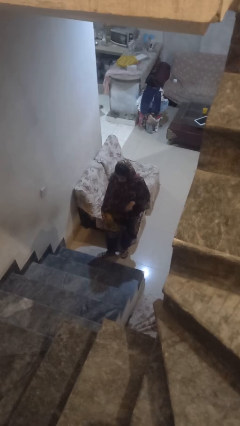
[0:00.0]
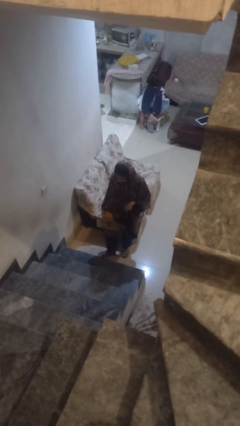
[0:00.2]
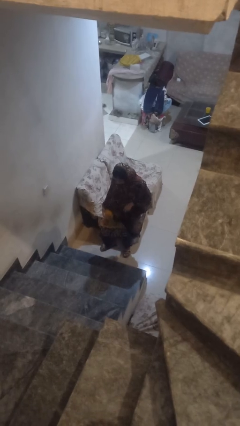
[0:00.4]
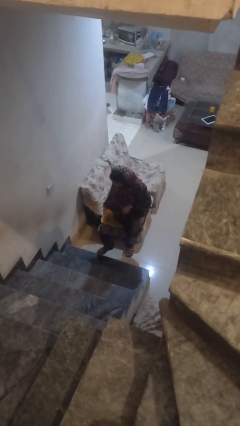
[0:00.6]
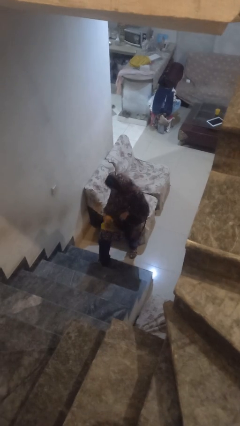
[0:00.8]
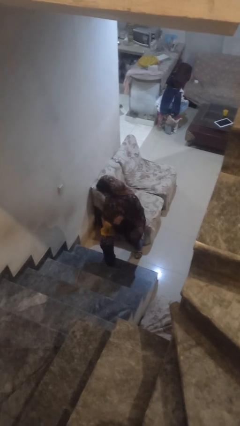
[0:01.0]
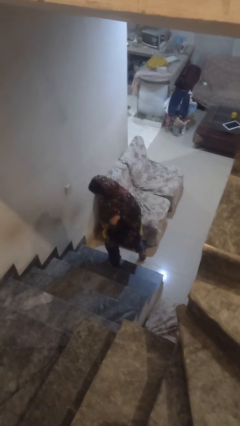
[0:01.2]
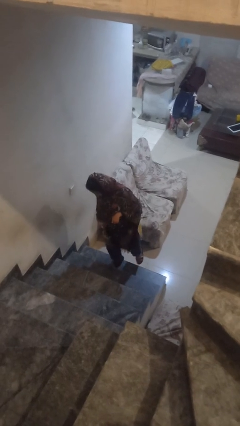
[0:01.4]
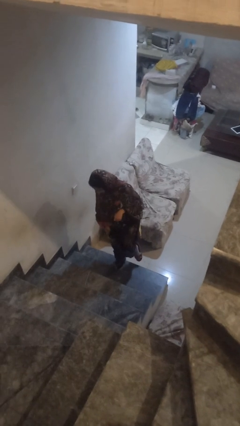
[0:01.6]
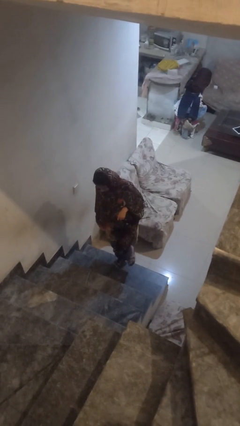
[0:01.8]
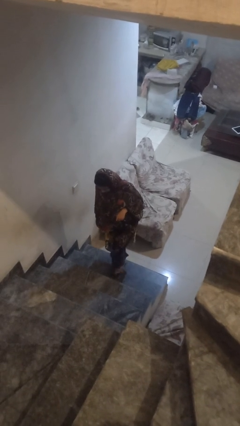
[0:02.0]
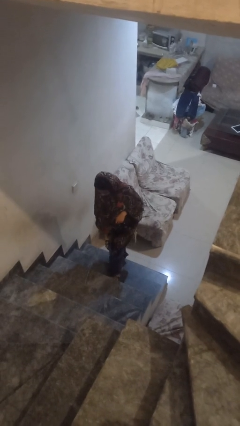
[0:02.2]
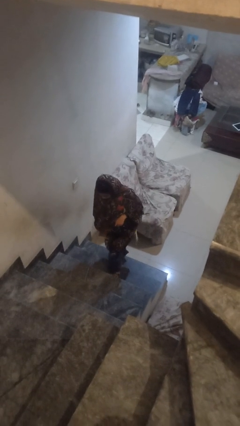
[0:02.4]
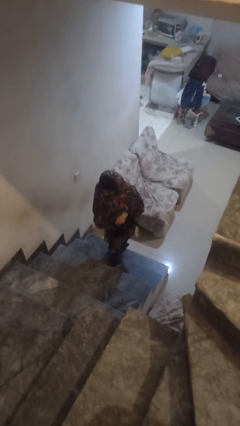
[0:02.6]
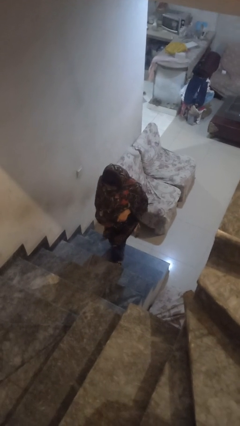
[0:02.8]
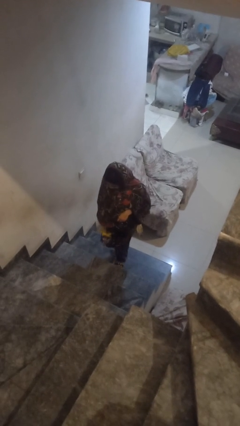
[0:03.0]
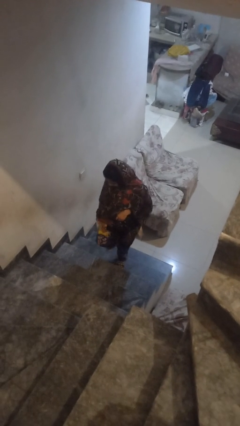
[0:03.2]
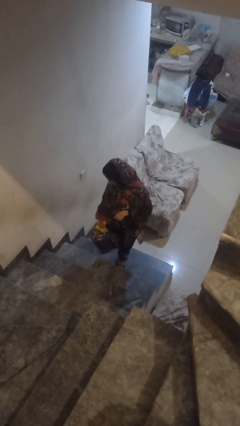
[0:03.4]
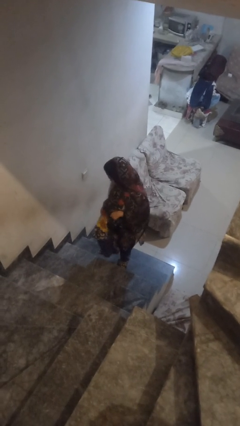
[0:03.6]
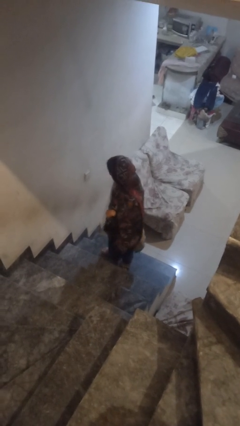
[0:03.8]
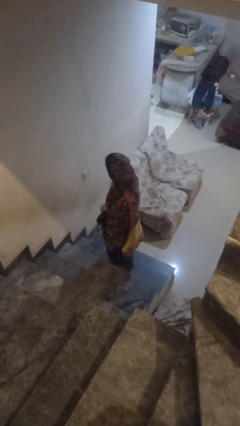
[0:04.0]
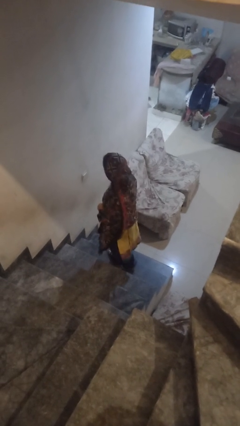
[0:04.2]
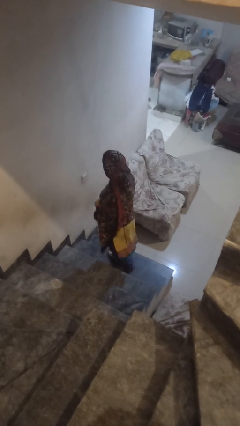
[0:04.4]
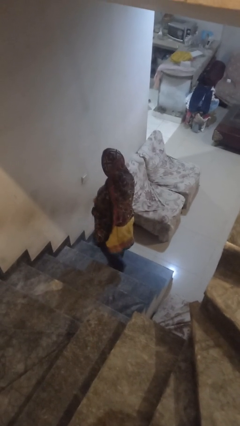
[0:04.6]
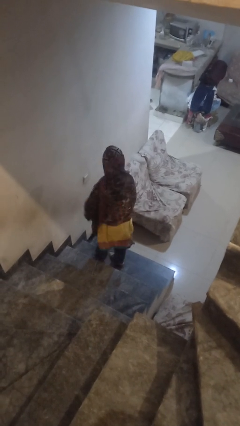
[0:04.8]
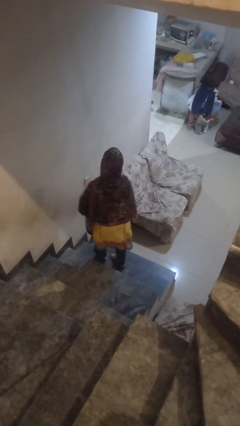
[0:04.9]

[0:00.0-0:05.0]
person climbs up stairs

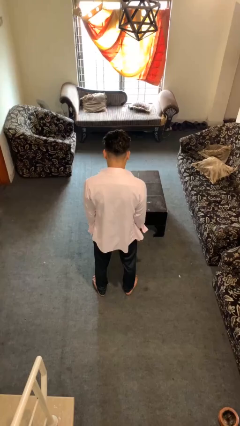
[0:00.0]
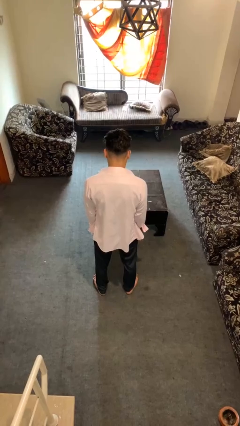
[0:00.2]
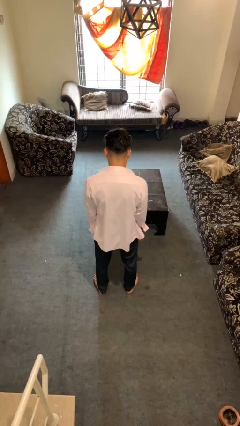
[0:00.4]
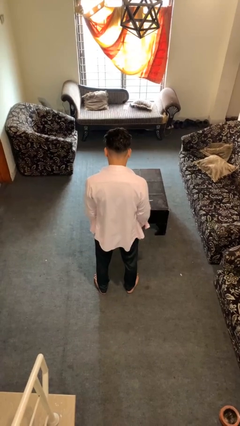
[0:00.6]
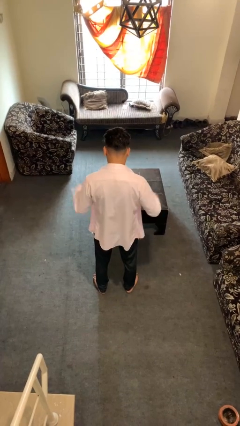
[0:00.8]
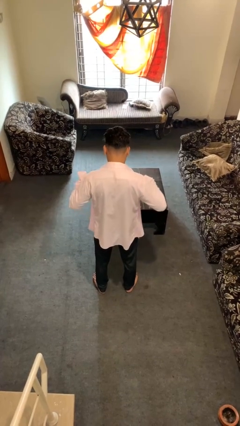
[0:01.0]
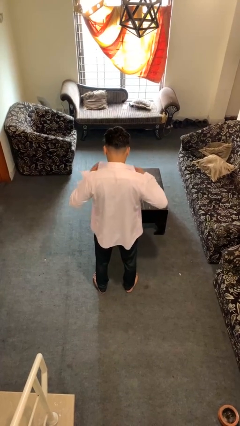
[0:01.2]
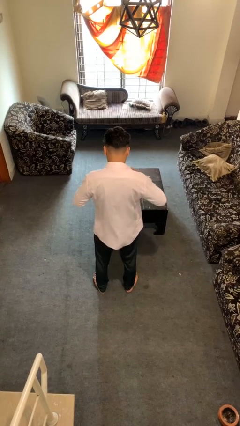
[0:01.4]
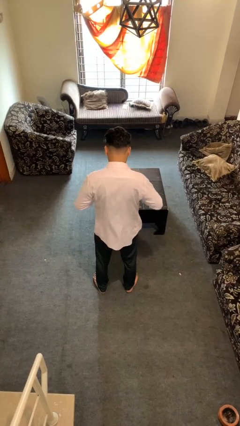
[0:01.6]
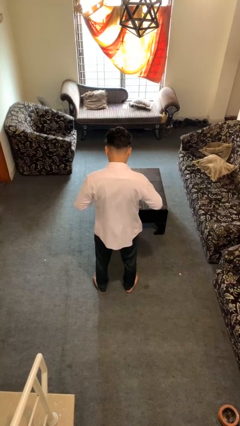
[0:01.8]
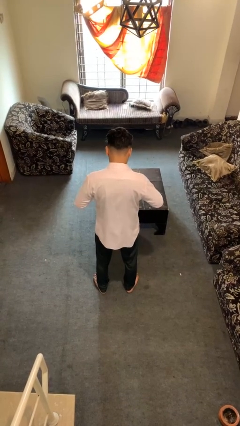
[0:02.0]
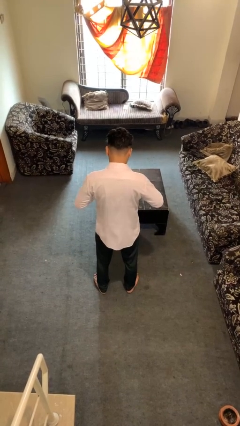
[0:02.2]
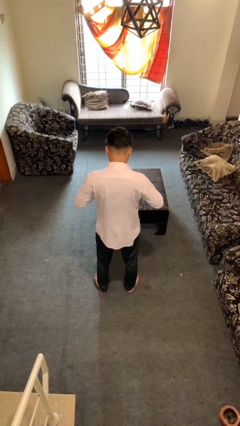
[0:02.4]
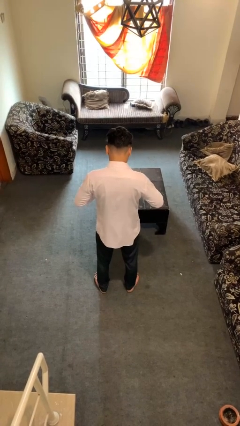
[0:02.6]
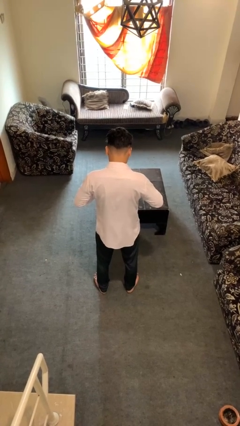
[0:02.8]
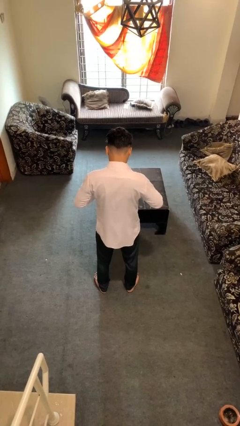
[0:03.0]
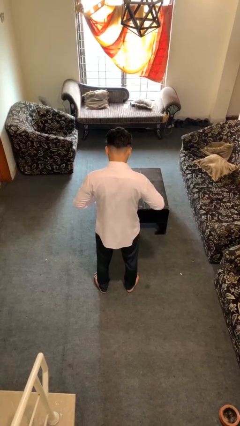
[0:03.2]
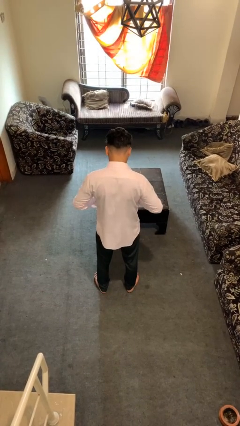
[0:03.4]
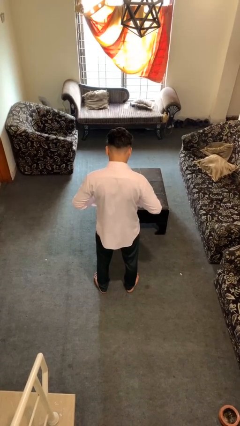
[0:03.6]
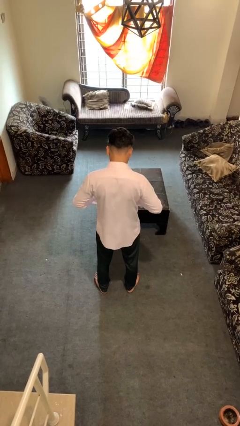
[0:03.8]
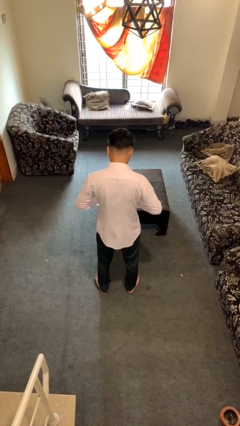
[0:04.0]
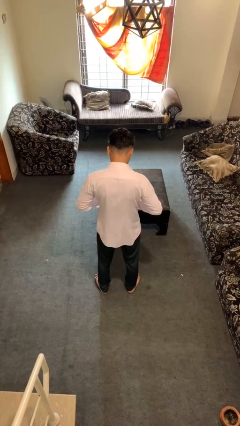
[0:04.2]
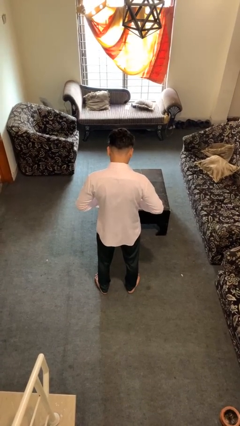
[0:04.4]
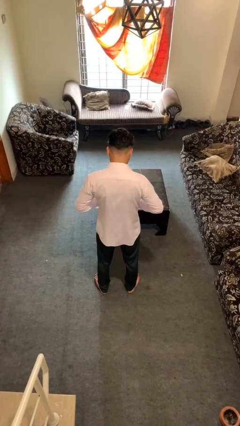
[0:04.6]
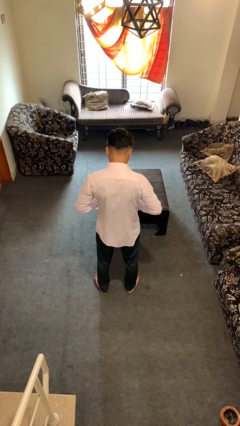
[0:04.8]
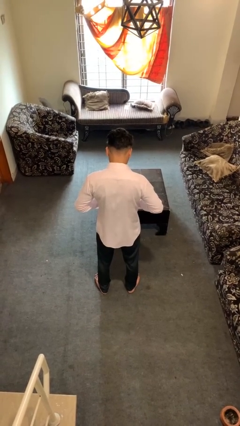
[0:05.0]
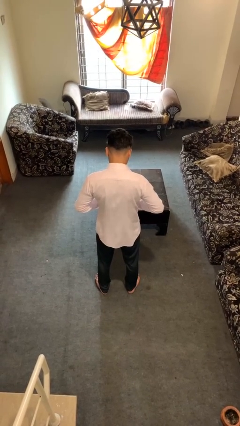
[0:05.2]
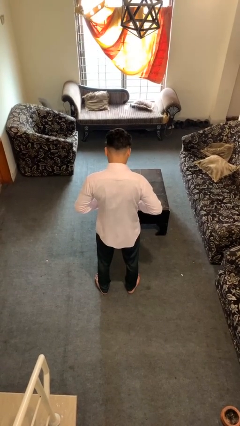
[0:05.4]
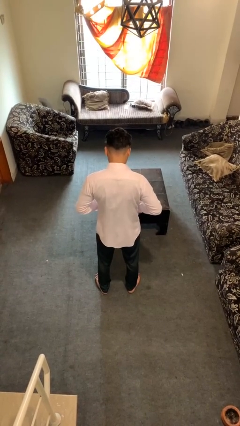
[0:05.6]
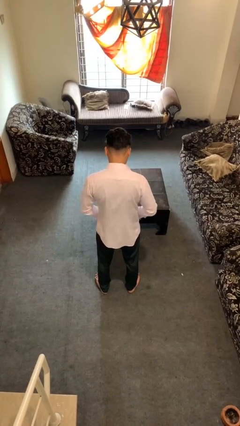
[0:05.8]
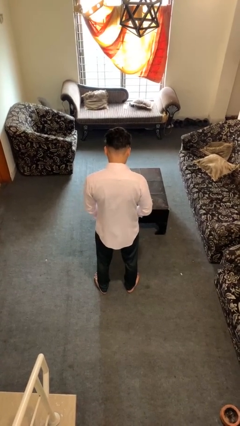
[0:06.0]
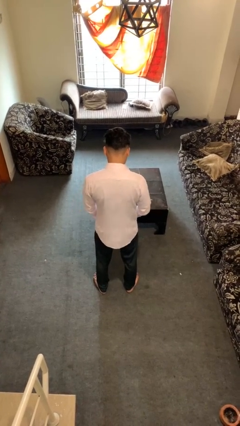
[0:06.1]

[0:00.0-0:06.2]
person buttons shirt

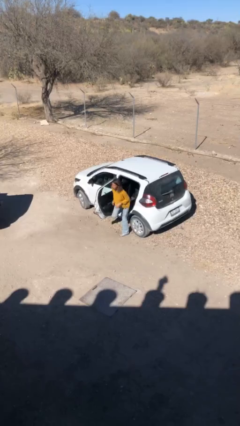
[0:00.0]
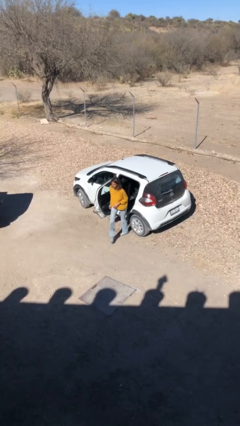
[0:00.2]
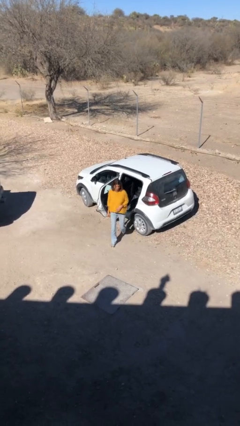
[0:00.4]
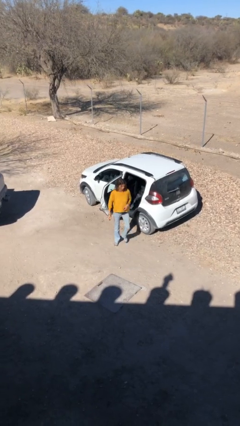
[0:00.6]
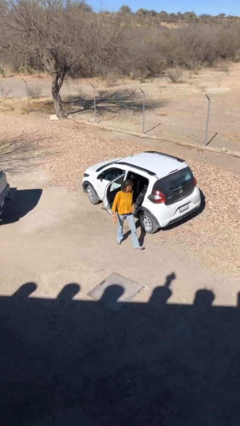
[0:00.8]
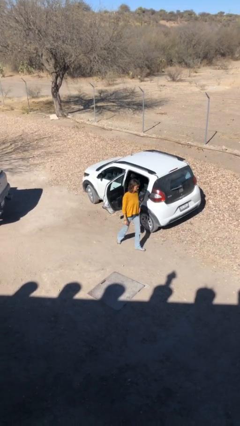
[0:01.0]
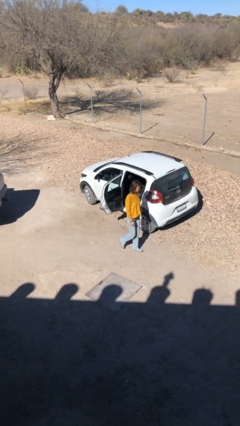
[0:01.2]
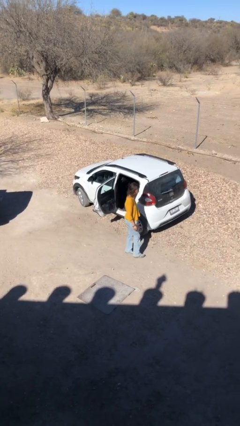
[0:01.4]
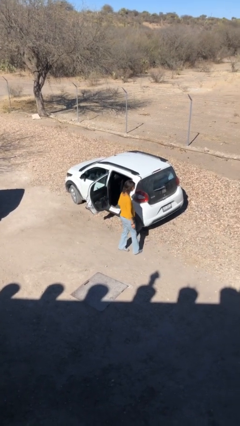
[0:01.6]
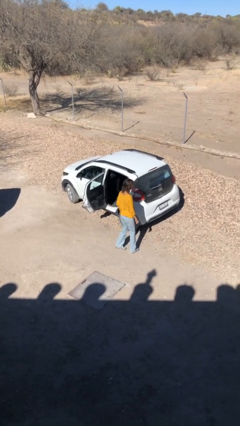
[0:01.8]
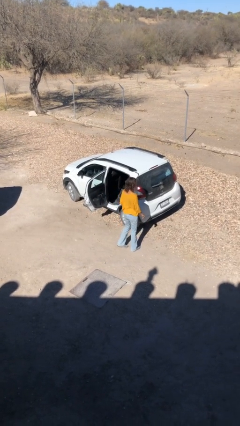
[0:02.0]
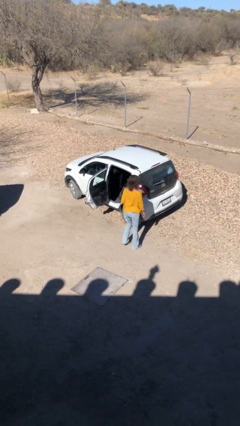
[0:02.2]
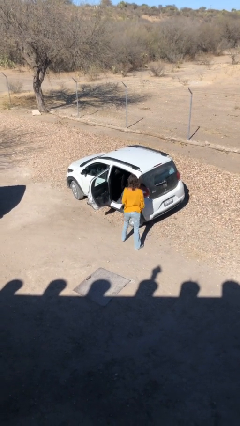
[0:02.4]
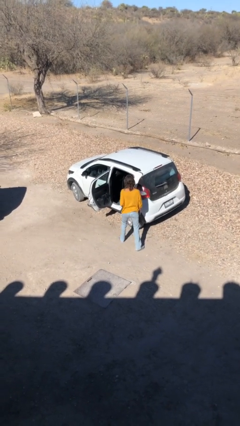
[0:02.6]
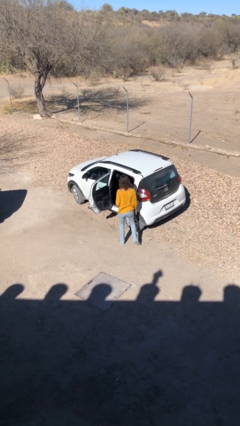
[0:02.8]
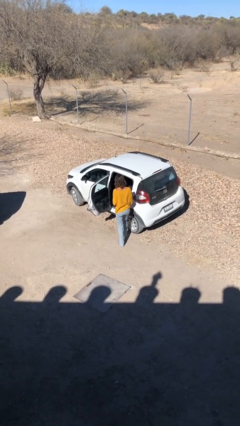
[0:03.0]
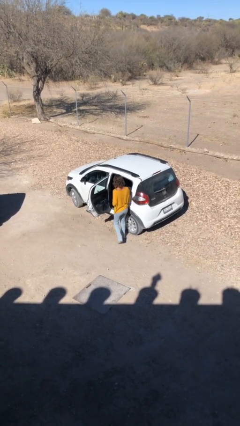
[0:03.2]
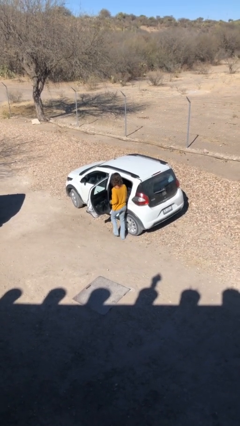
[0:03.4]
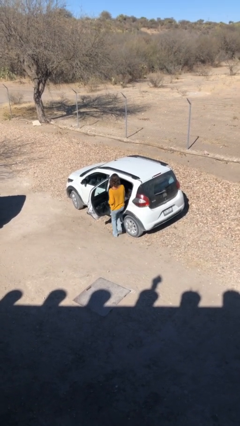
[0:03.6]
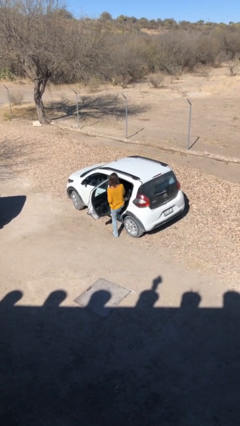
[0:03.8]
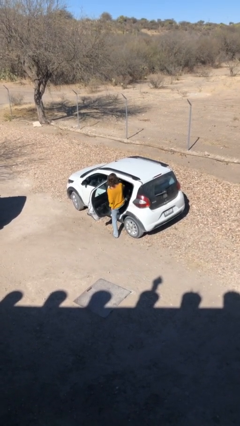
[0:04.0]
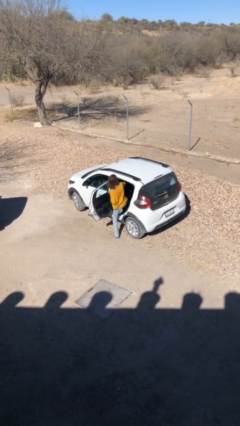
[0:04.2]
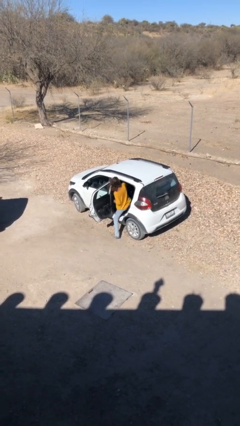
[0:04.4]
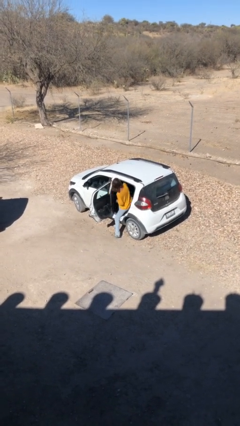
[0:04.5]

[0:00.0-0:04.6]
person exits car

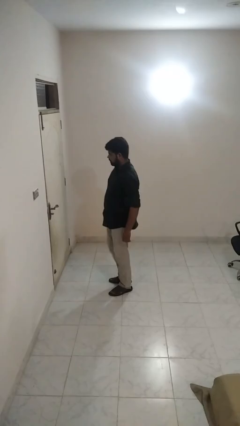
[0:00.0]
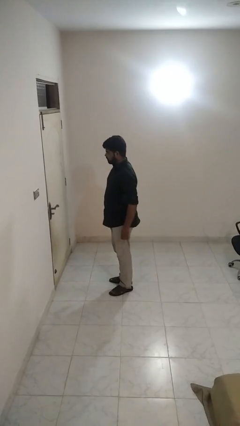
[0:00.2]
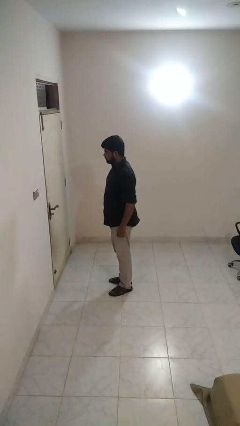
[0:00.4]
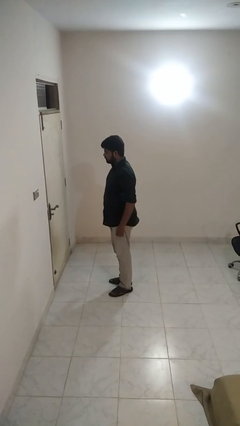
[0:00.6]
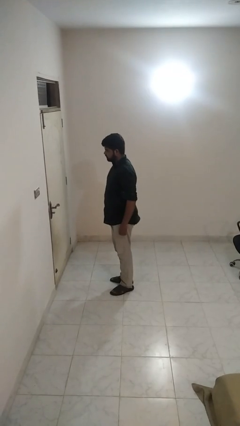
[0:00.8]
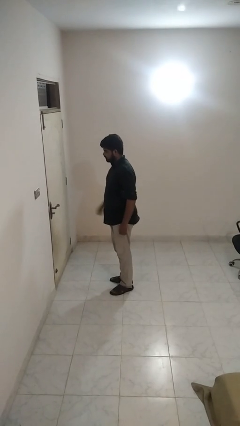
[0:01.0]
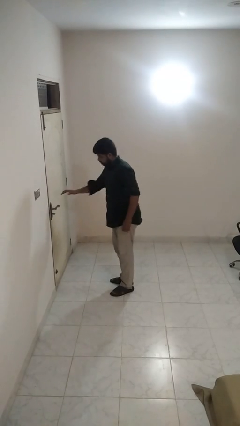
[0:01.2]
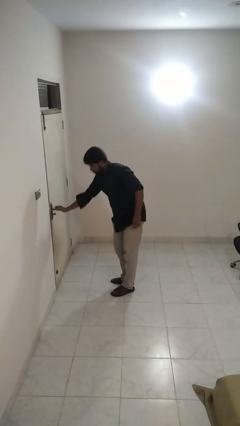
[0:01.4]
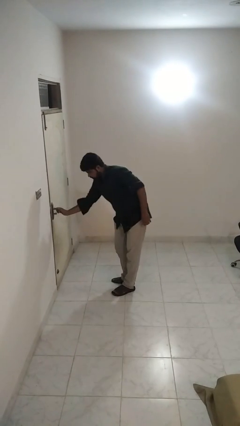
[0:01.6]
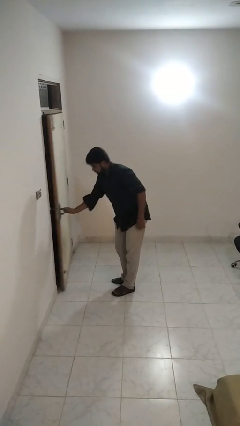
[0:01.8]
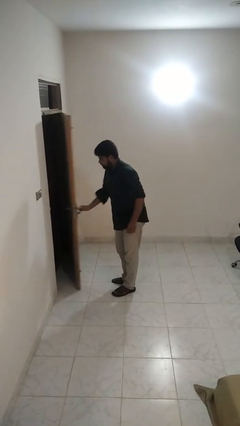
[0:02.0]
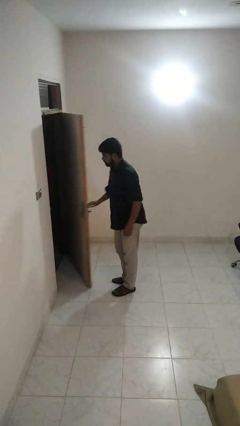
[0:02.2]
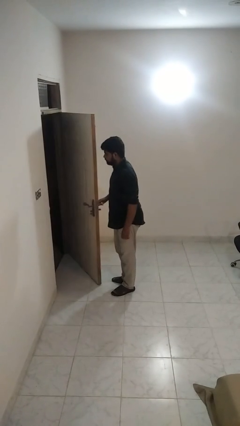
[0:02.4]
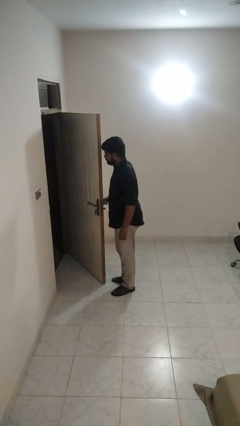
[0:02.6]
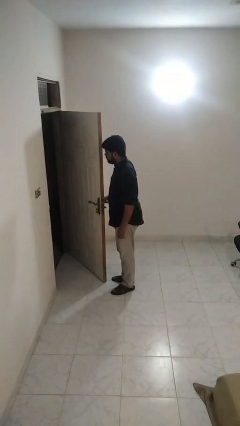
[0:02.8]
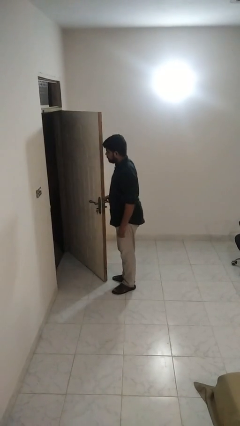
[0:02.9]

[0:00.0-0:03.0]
person opens facility door
